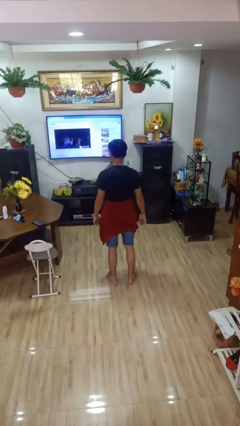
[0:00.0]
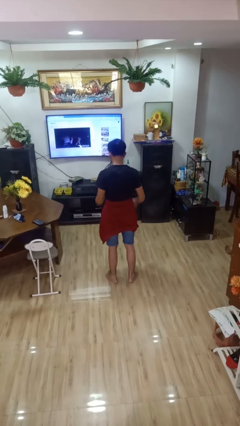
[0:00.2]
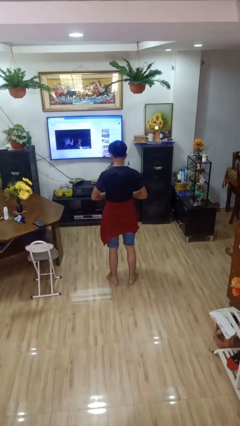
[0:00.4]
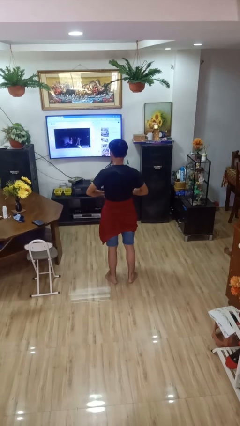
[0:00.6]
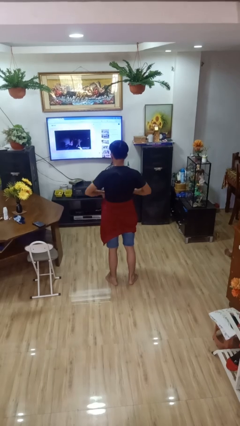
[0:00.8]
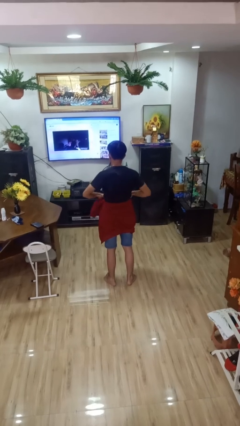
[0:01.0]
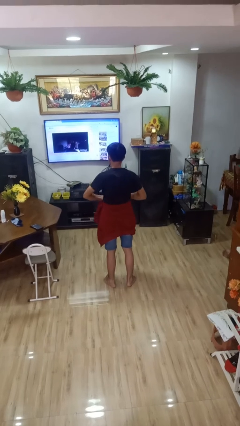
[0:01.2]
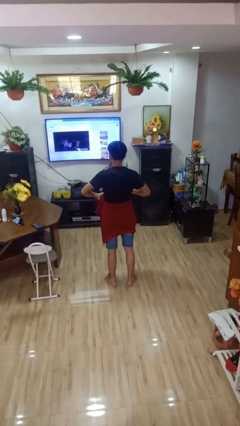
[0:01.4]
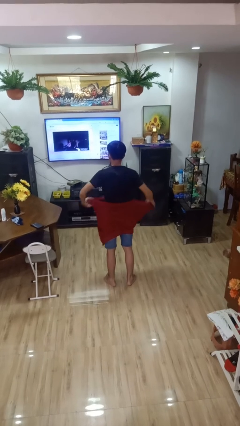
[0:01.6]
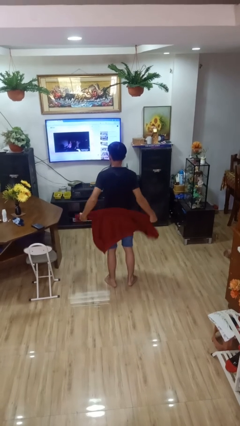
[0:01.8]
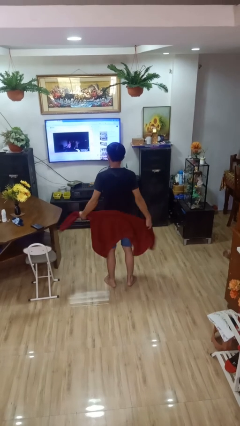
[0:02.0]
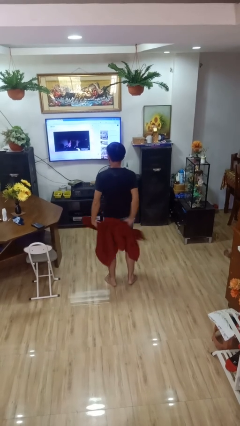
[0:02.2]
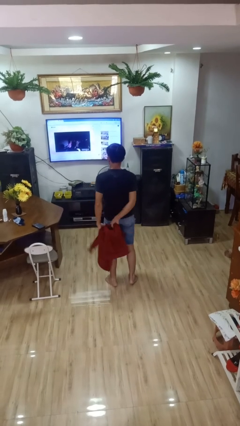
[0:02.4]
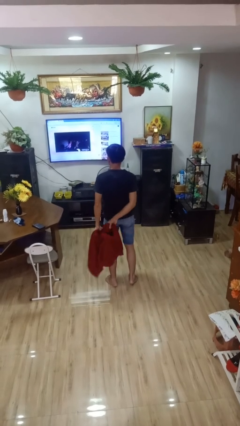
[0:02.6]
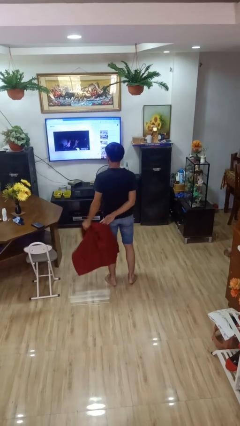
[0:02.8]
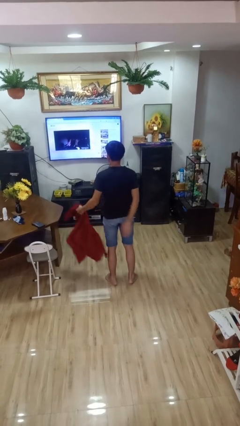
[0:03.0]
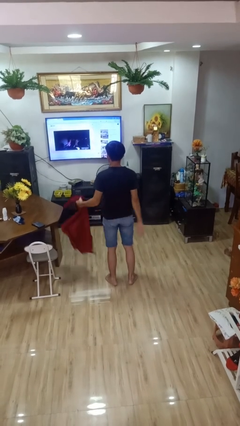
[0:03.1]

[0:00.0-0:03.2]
person unties jacket around waist

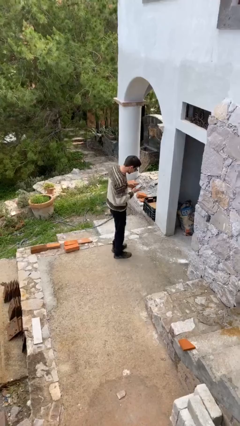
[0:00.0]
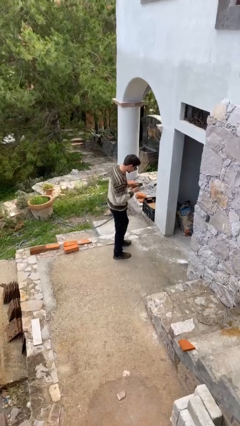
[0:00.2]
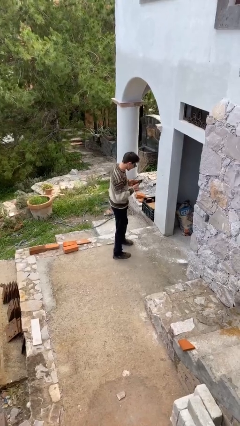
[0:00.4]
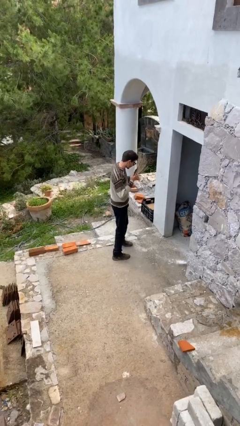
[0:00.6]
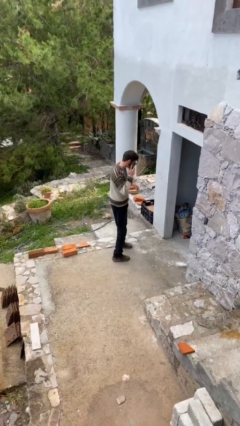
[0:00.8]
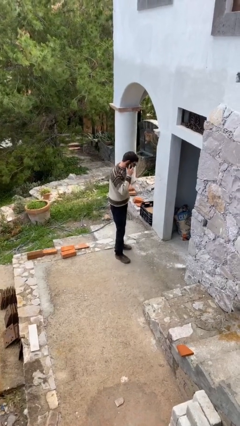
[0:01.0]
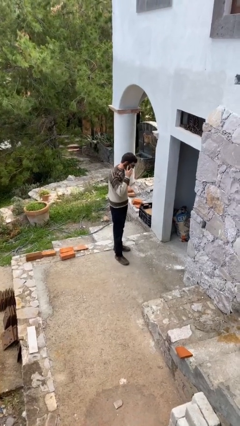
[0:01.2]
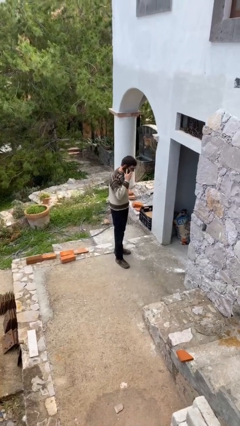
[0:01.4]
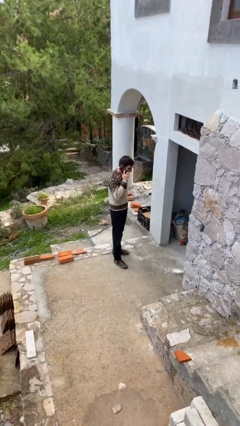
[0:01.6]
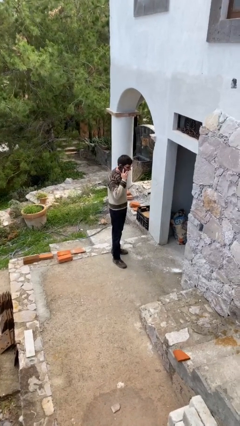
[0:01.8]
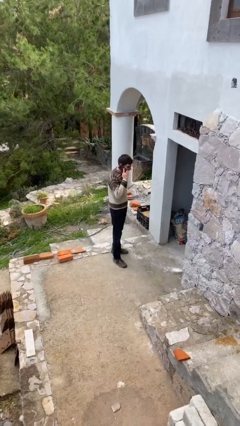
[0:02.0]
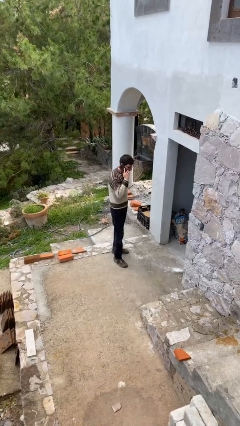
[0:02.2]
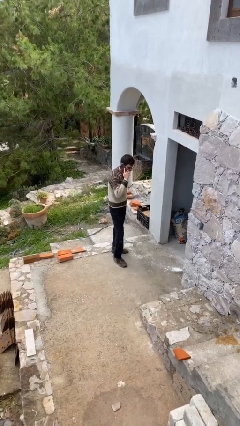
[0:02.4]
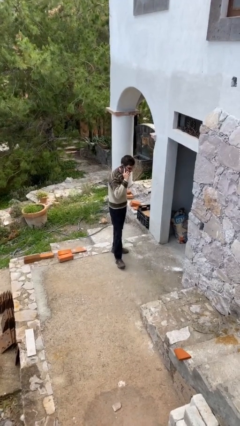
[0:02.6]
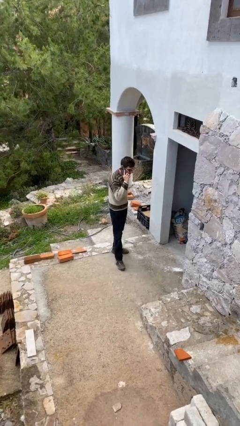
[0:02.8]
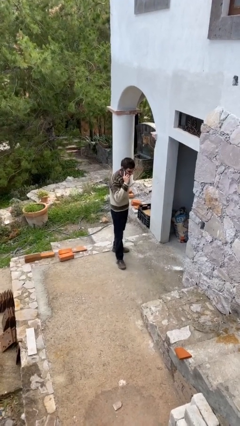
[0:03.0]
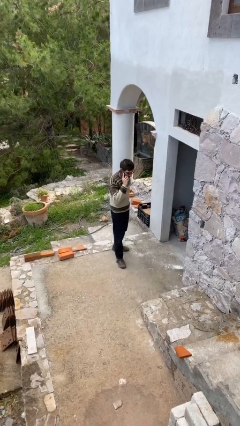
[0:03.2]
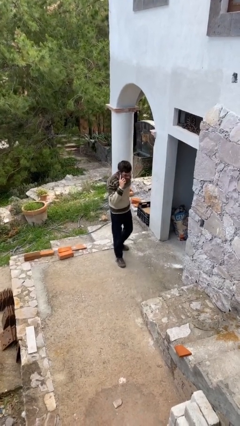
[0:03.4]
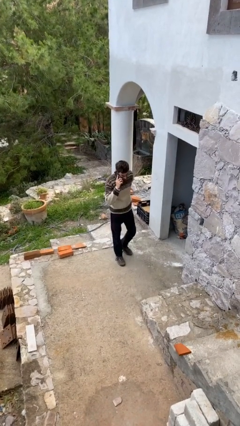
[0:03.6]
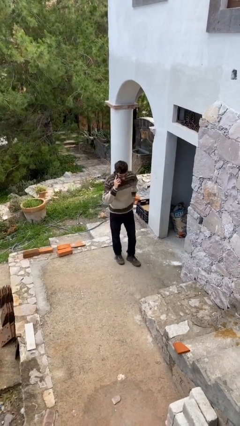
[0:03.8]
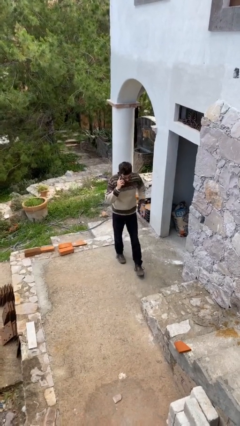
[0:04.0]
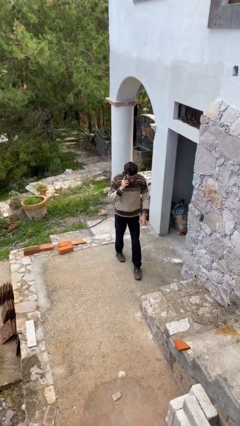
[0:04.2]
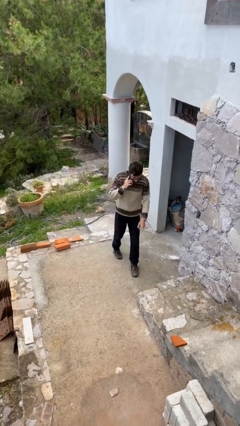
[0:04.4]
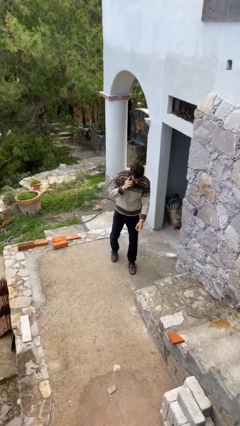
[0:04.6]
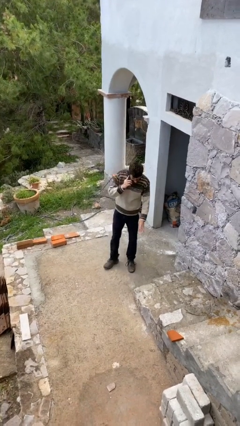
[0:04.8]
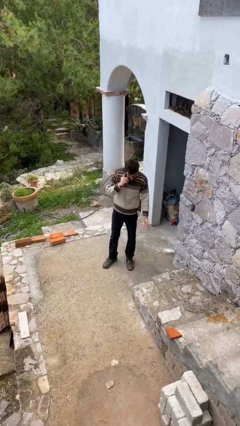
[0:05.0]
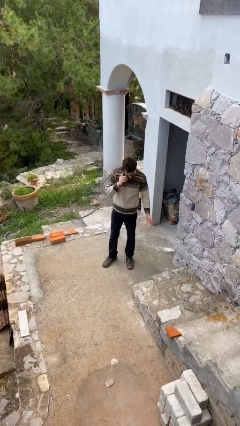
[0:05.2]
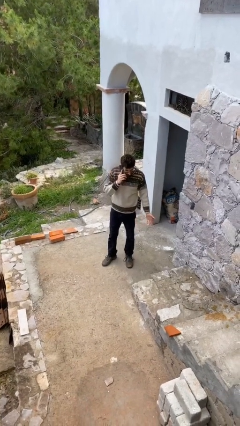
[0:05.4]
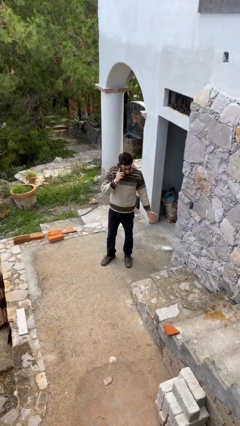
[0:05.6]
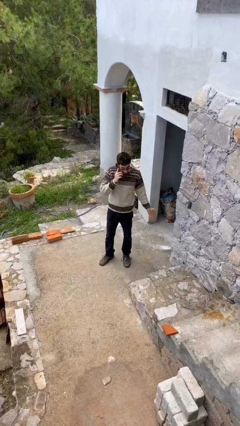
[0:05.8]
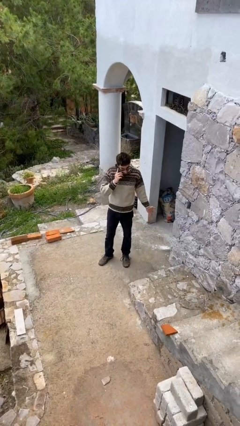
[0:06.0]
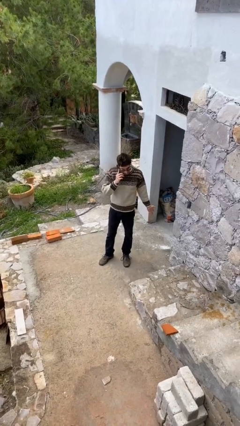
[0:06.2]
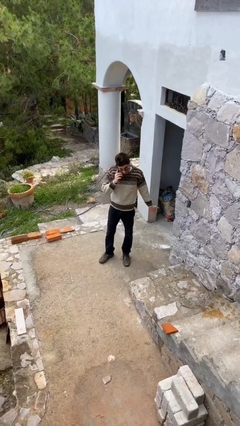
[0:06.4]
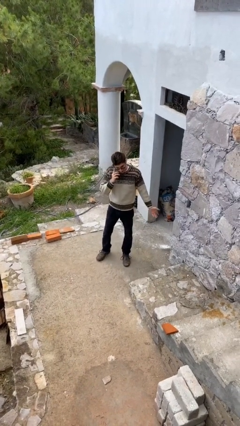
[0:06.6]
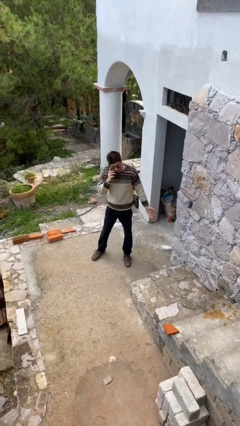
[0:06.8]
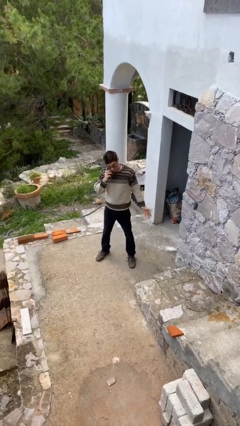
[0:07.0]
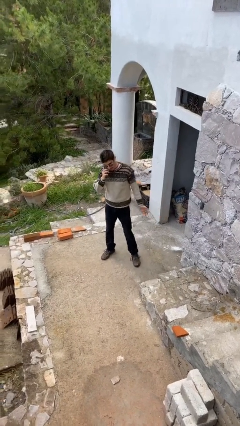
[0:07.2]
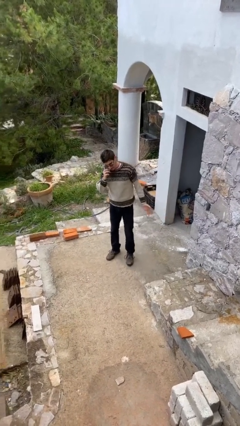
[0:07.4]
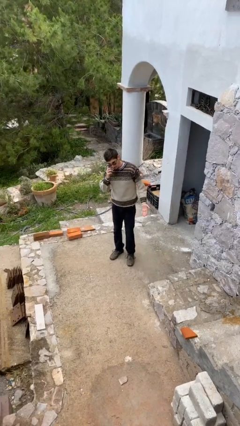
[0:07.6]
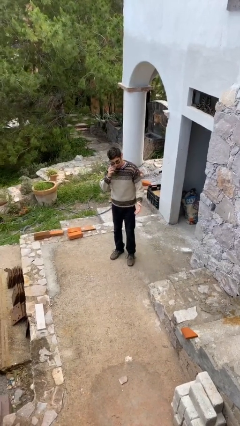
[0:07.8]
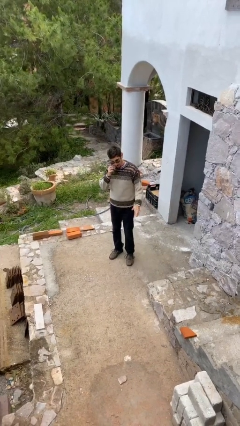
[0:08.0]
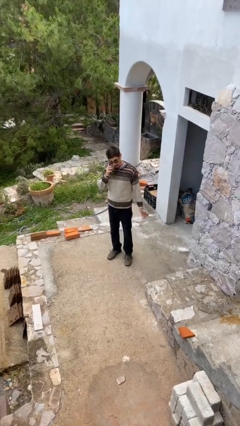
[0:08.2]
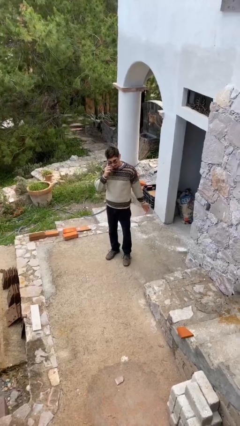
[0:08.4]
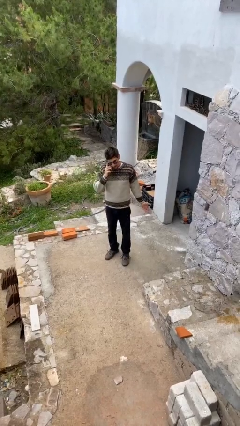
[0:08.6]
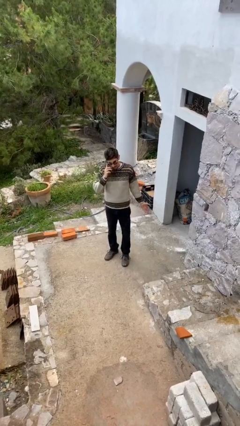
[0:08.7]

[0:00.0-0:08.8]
person talks on phone

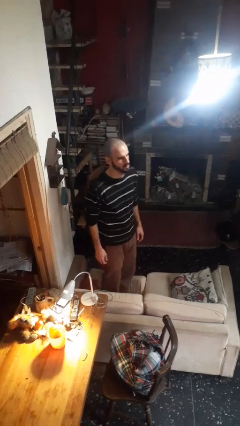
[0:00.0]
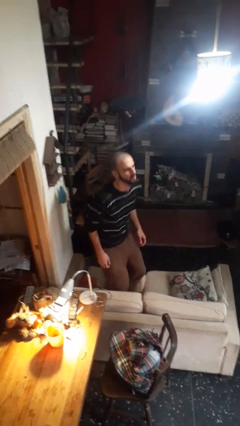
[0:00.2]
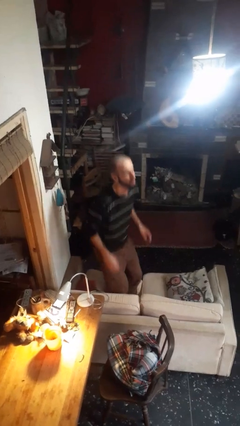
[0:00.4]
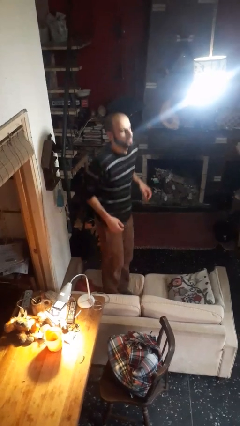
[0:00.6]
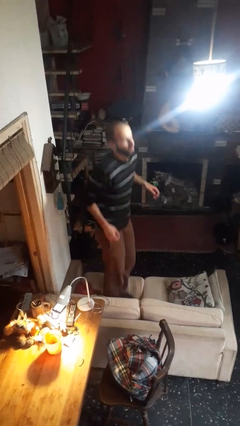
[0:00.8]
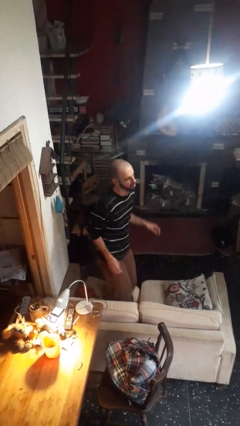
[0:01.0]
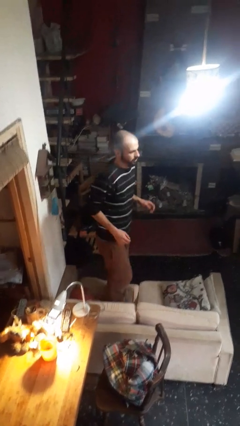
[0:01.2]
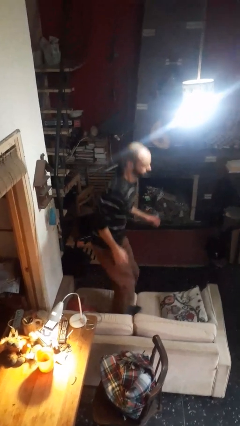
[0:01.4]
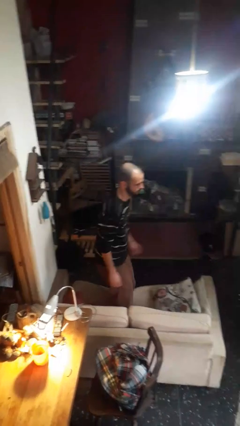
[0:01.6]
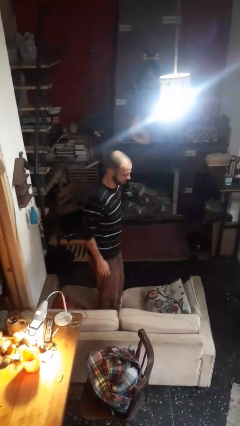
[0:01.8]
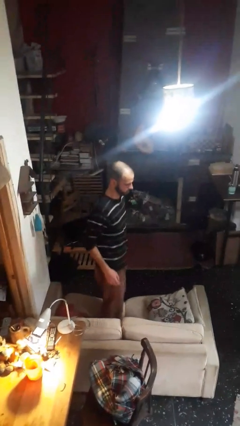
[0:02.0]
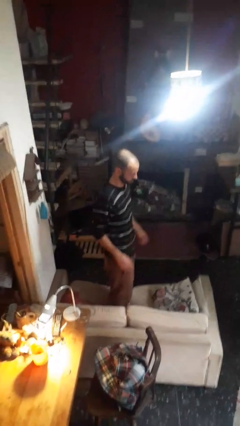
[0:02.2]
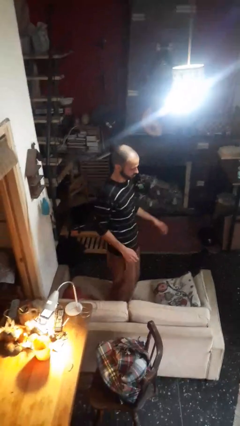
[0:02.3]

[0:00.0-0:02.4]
person jumps on couch

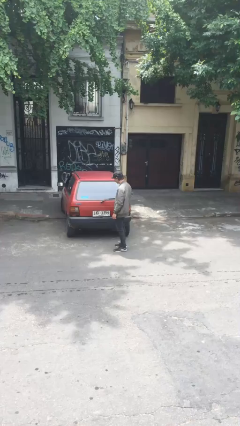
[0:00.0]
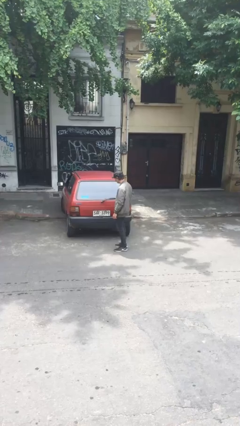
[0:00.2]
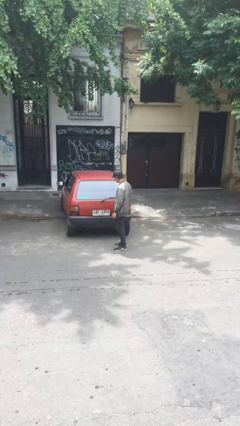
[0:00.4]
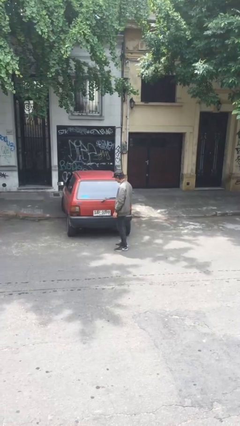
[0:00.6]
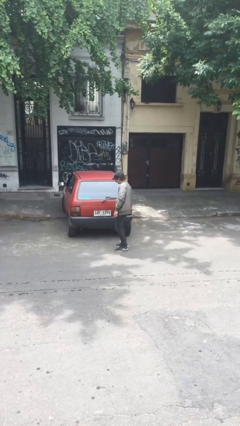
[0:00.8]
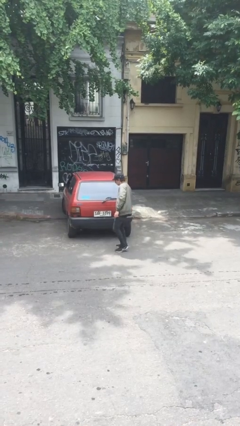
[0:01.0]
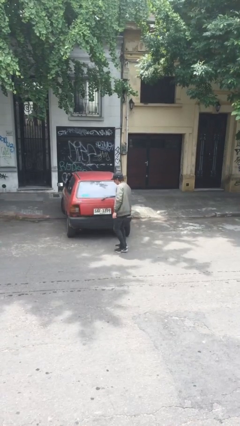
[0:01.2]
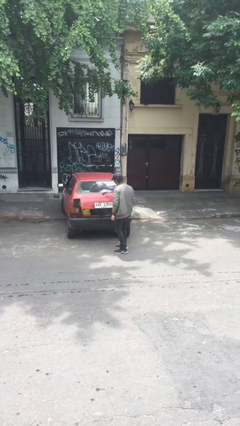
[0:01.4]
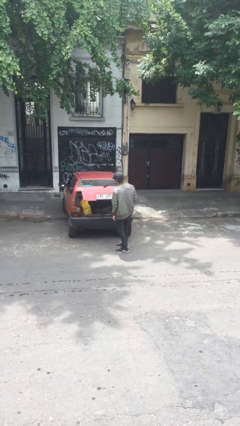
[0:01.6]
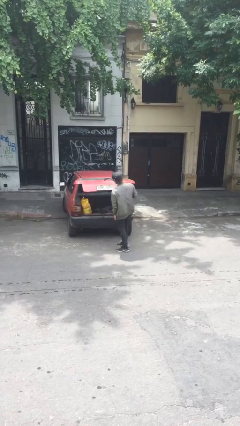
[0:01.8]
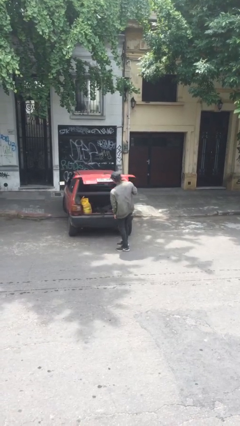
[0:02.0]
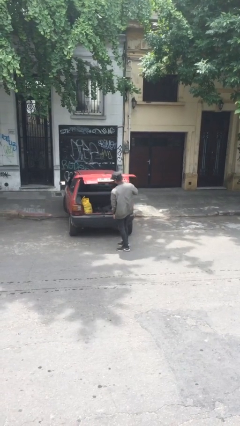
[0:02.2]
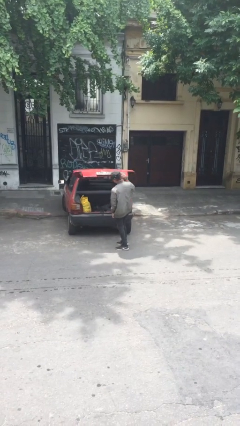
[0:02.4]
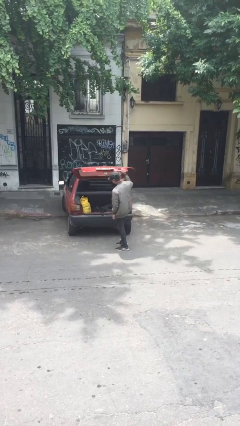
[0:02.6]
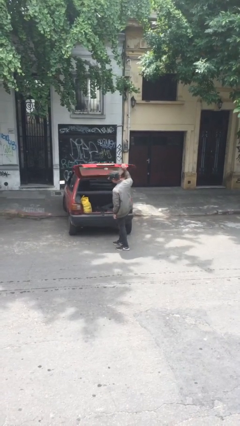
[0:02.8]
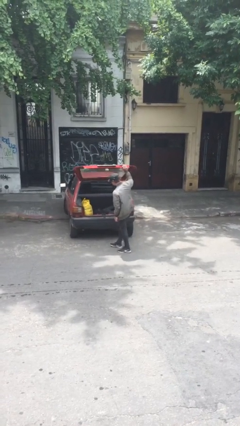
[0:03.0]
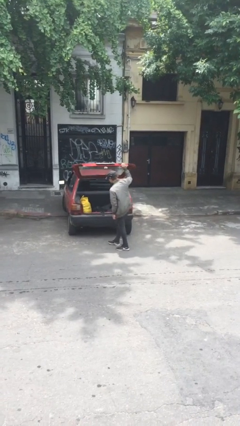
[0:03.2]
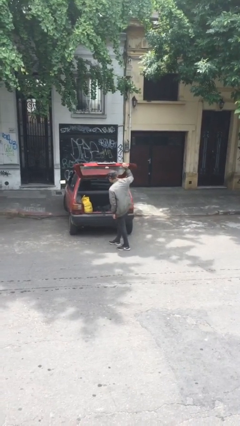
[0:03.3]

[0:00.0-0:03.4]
person opens car trunk
